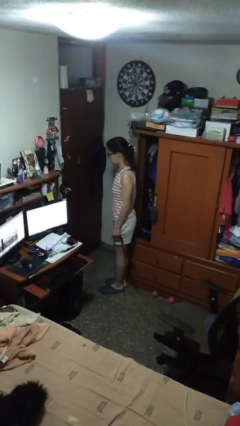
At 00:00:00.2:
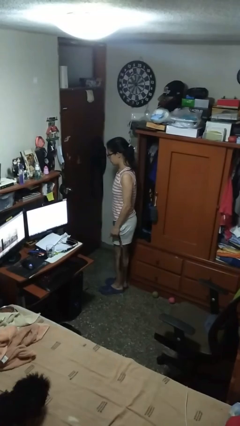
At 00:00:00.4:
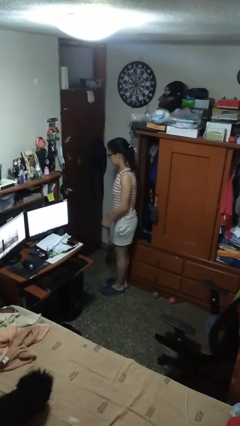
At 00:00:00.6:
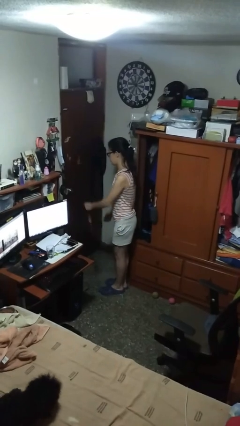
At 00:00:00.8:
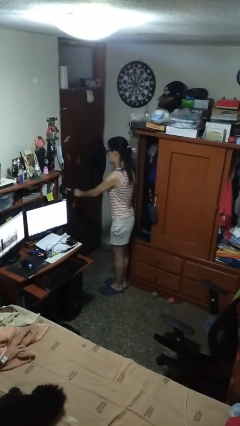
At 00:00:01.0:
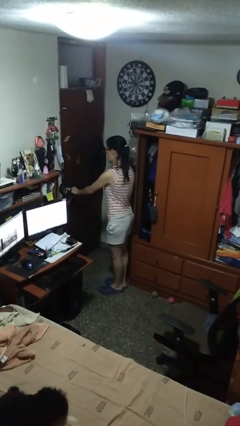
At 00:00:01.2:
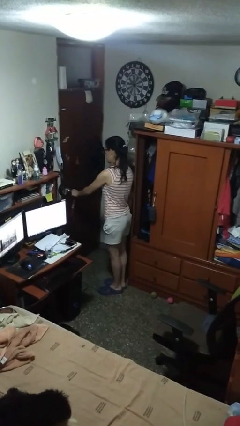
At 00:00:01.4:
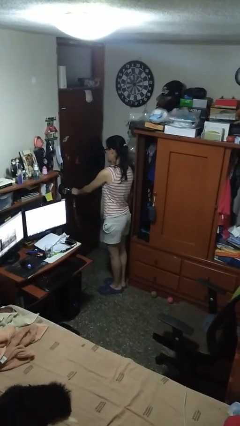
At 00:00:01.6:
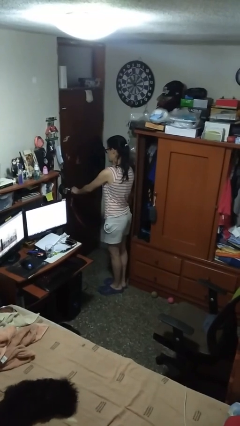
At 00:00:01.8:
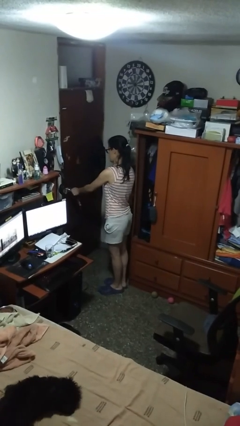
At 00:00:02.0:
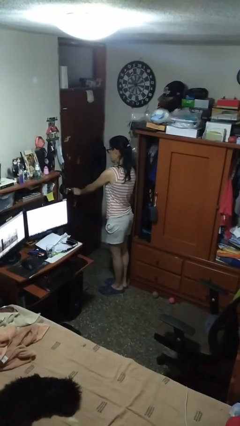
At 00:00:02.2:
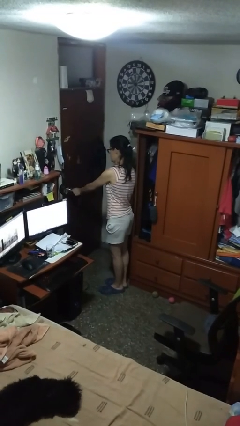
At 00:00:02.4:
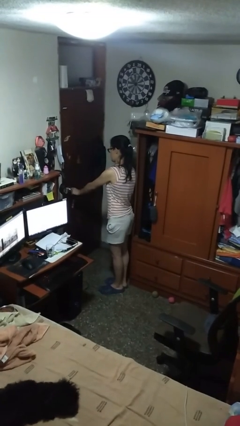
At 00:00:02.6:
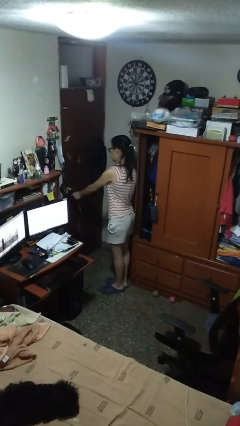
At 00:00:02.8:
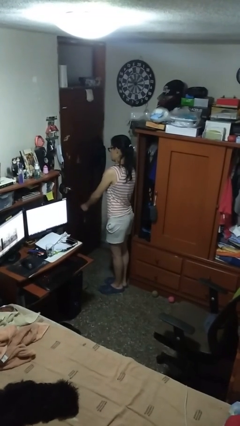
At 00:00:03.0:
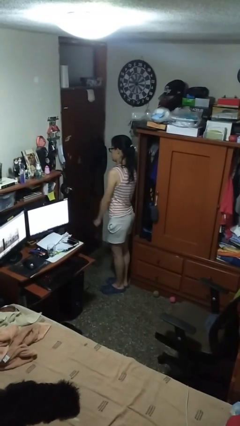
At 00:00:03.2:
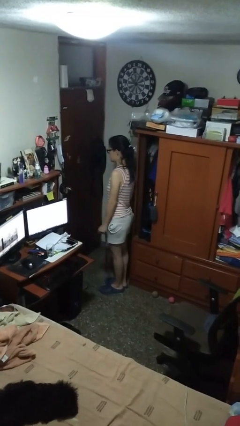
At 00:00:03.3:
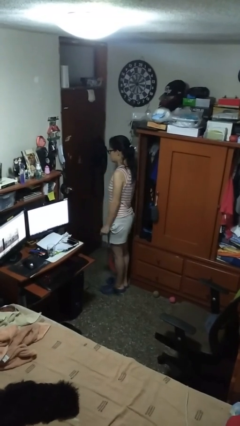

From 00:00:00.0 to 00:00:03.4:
person unlocks door with keys

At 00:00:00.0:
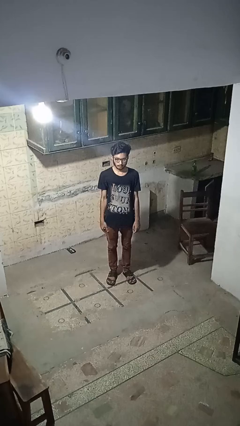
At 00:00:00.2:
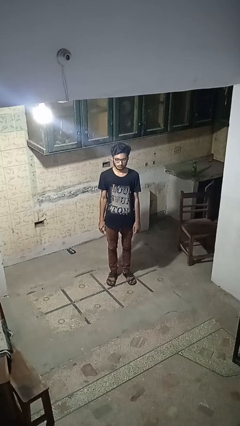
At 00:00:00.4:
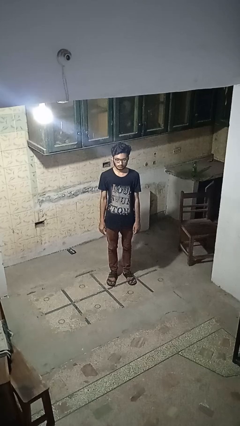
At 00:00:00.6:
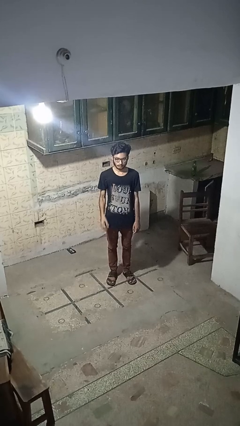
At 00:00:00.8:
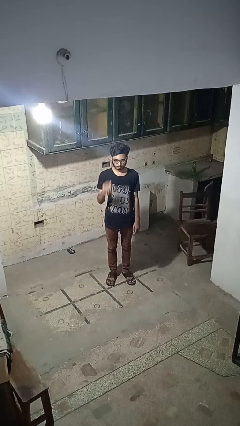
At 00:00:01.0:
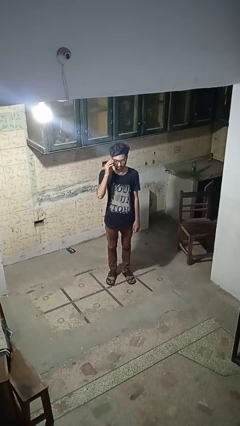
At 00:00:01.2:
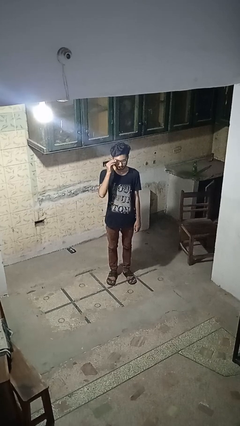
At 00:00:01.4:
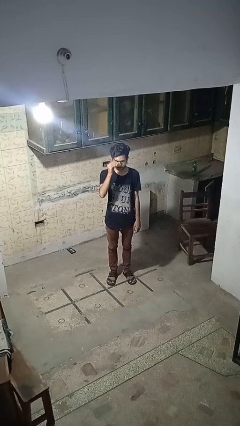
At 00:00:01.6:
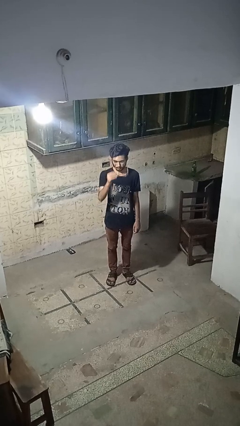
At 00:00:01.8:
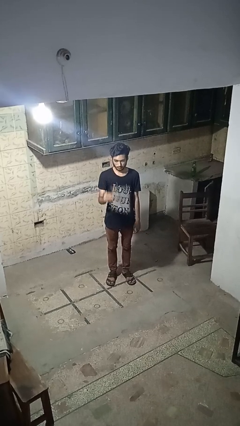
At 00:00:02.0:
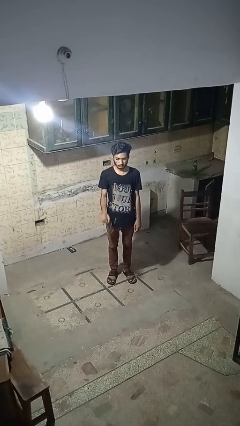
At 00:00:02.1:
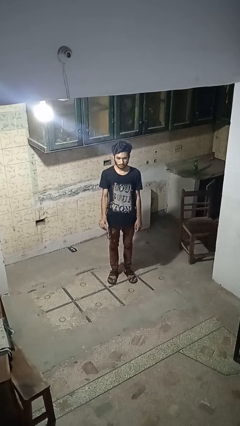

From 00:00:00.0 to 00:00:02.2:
person takes off glasses

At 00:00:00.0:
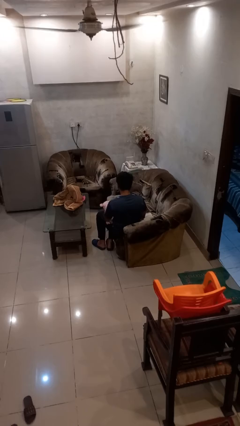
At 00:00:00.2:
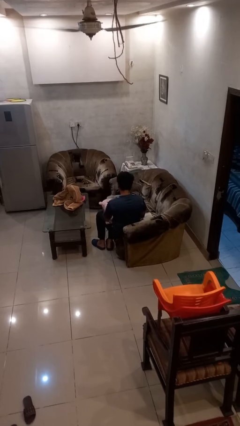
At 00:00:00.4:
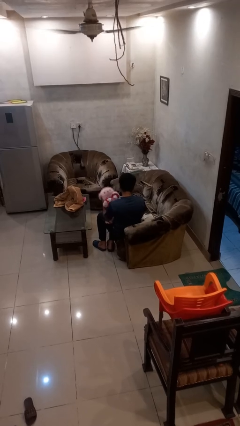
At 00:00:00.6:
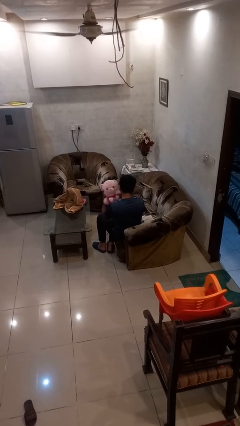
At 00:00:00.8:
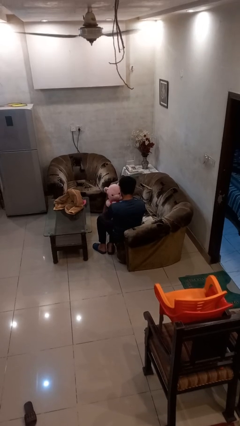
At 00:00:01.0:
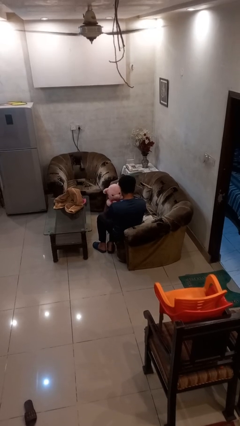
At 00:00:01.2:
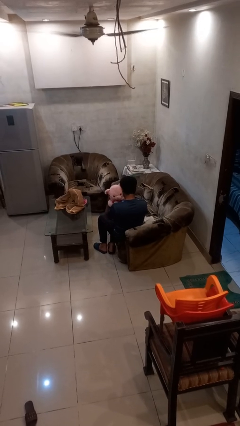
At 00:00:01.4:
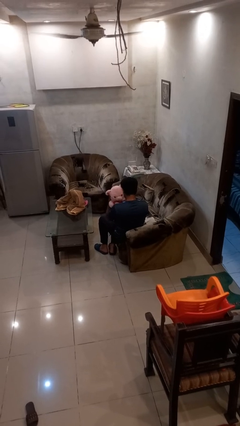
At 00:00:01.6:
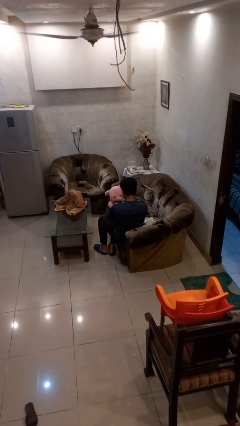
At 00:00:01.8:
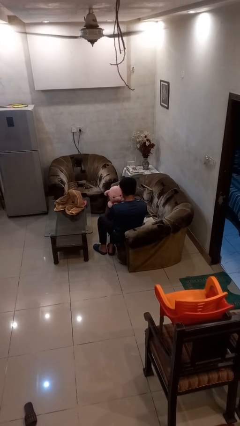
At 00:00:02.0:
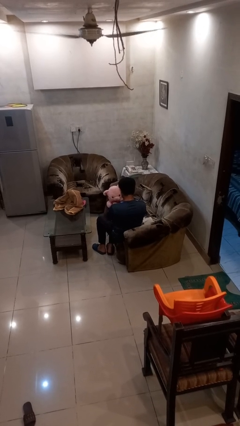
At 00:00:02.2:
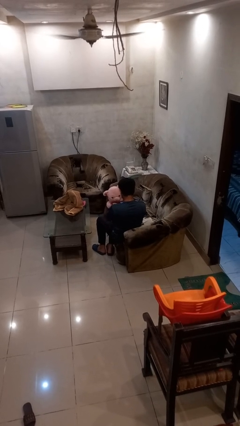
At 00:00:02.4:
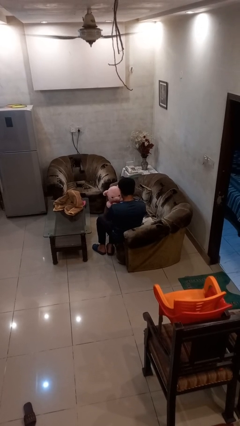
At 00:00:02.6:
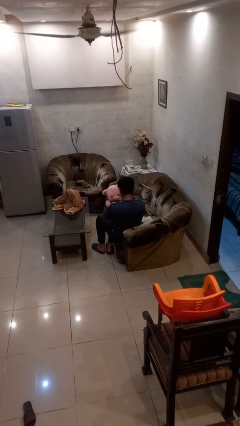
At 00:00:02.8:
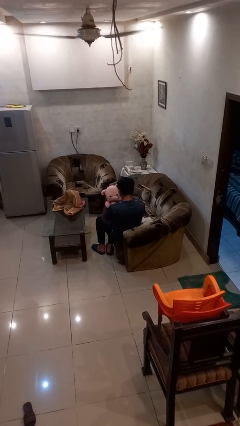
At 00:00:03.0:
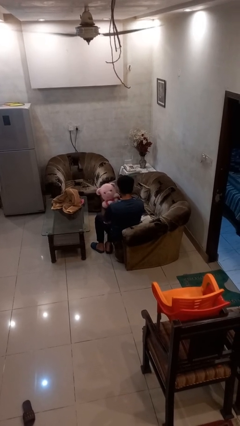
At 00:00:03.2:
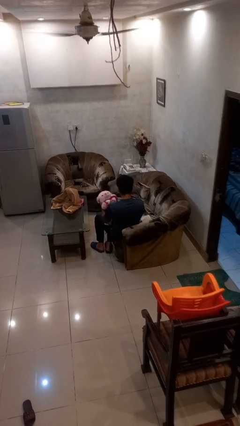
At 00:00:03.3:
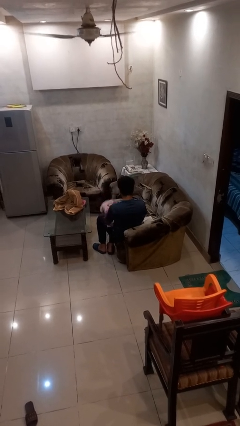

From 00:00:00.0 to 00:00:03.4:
person hugs stuffed animal

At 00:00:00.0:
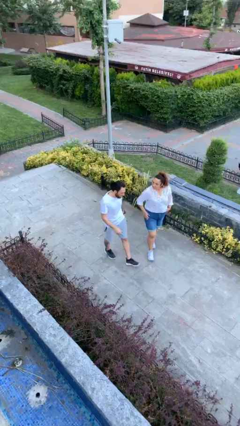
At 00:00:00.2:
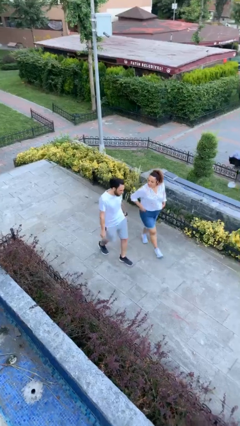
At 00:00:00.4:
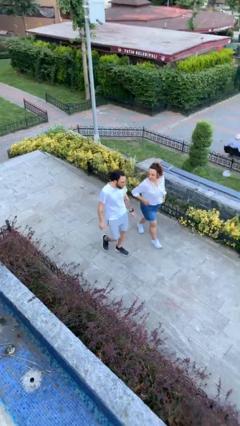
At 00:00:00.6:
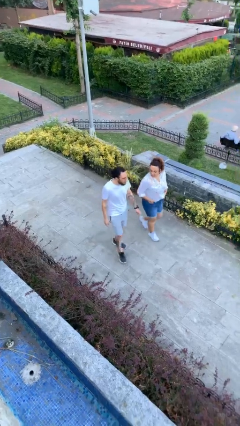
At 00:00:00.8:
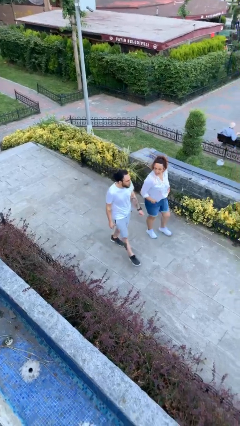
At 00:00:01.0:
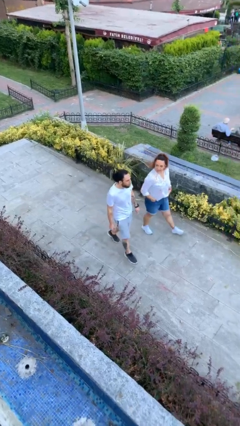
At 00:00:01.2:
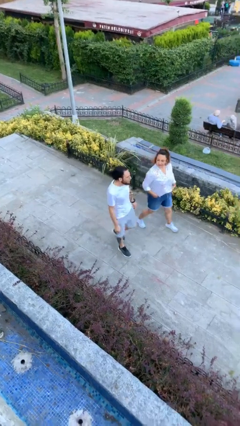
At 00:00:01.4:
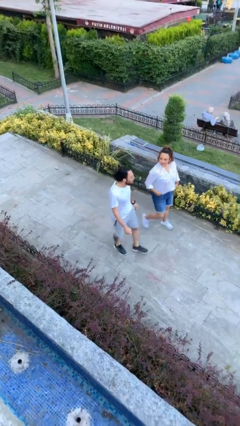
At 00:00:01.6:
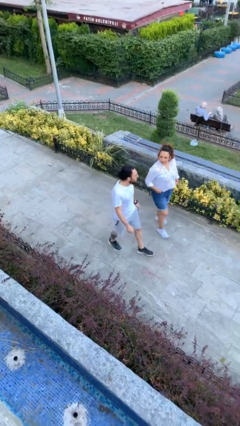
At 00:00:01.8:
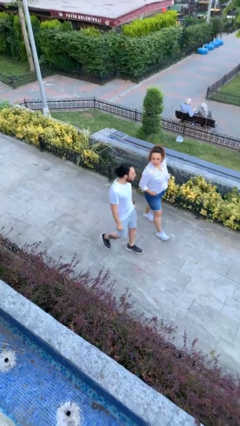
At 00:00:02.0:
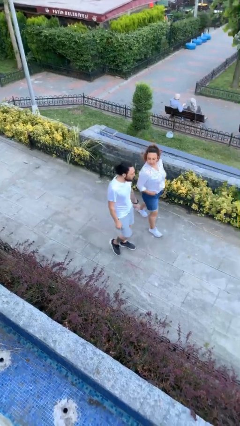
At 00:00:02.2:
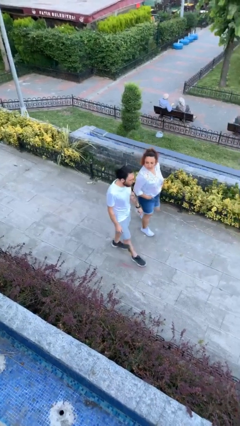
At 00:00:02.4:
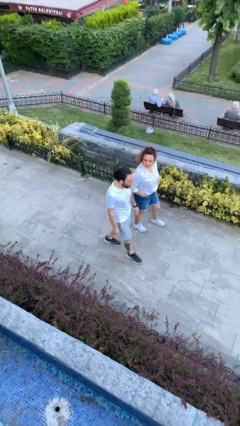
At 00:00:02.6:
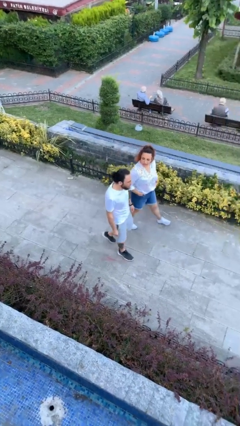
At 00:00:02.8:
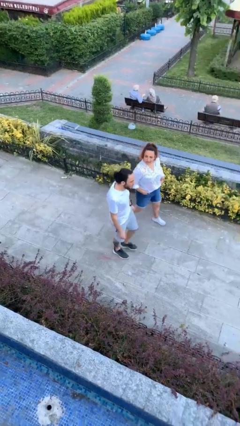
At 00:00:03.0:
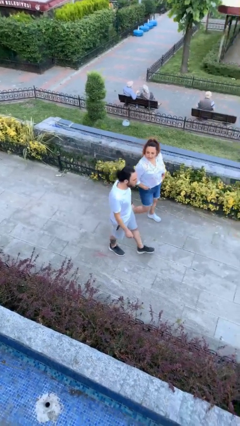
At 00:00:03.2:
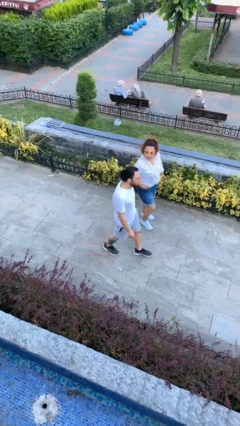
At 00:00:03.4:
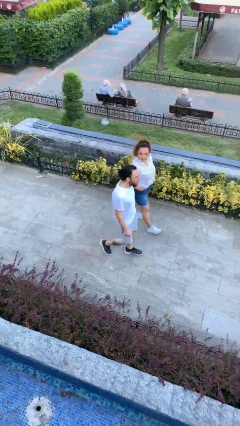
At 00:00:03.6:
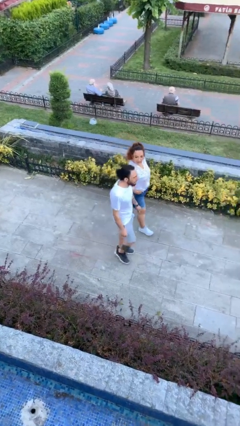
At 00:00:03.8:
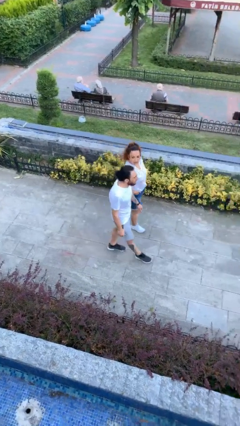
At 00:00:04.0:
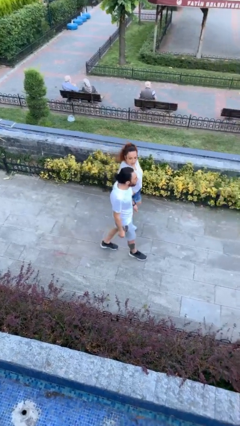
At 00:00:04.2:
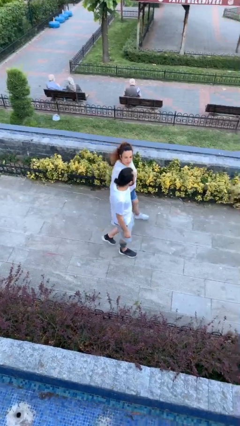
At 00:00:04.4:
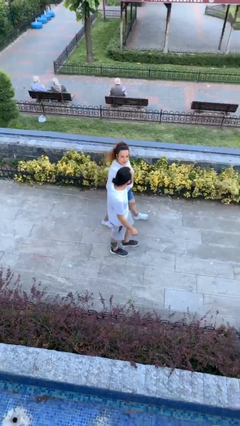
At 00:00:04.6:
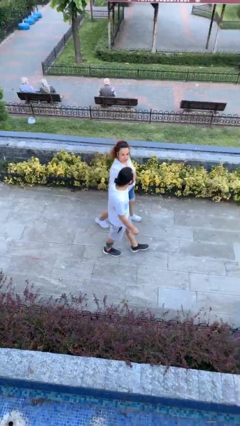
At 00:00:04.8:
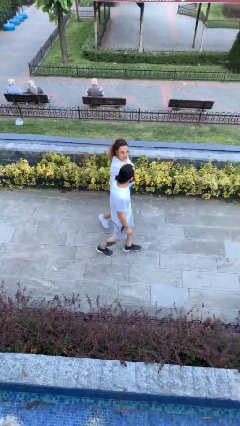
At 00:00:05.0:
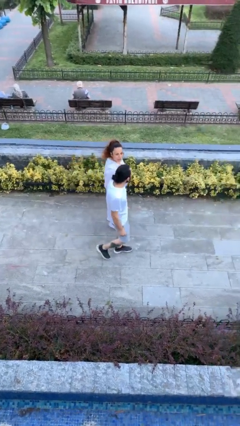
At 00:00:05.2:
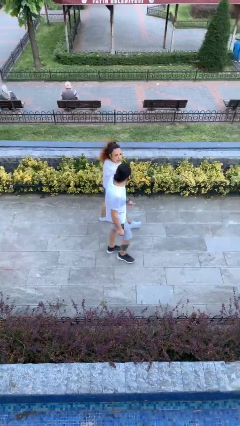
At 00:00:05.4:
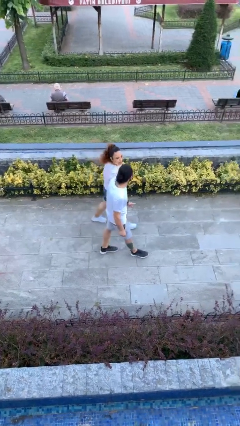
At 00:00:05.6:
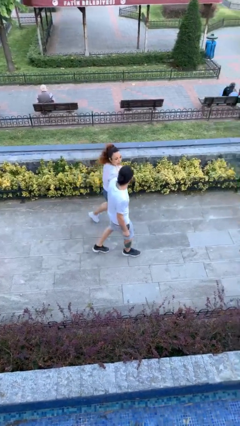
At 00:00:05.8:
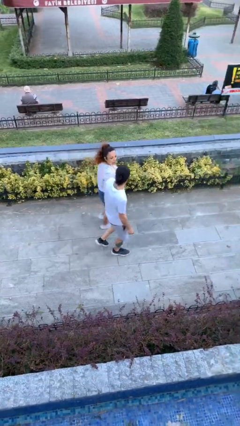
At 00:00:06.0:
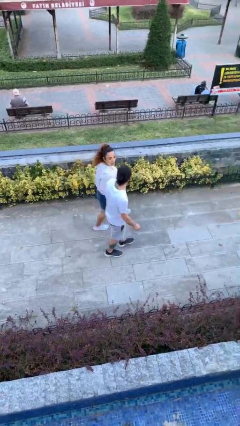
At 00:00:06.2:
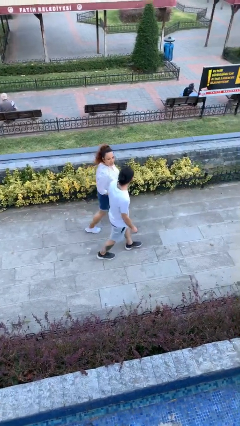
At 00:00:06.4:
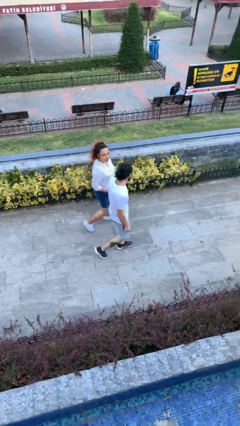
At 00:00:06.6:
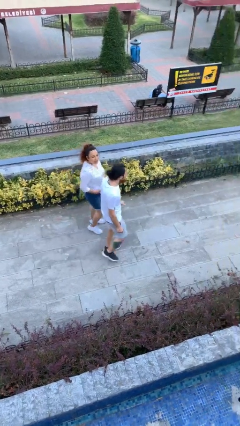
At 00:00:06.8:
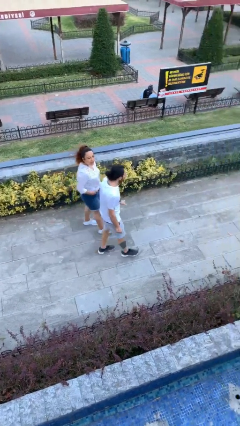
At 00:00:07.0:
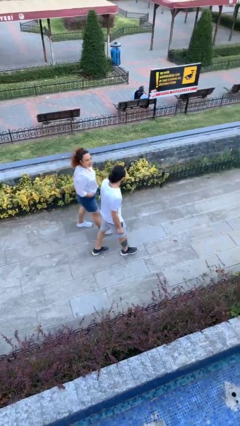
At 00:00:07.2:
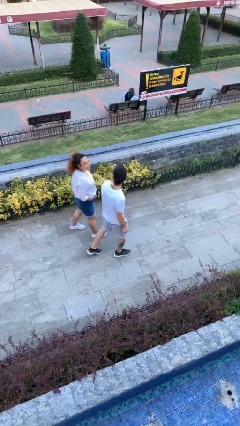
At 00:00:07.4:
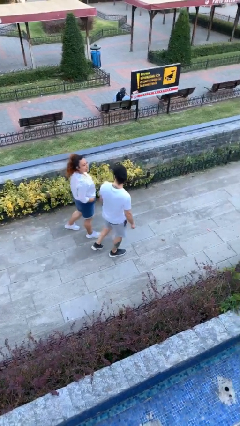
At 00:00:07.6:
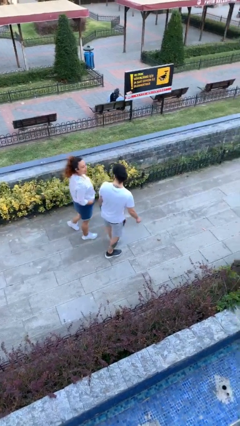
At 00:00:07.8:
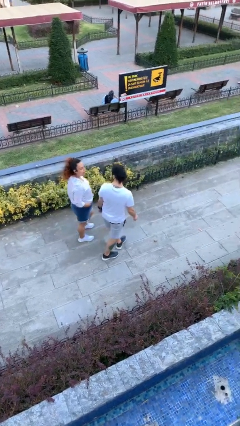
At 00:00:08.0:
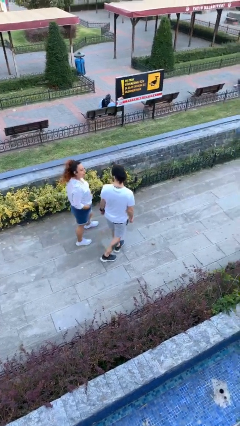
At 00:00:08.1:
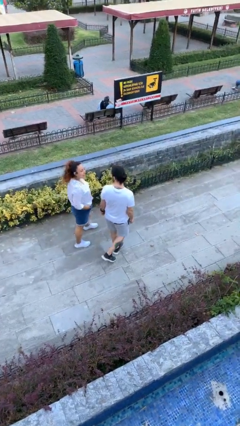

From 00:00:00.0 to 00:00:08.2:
person talks to person
